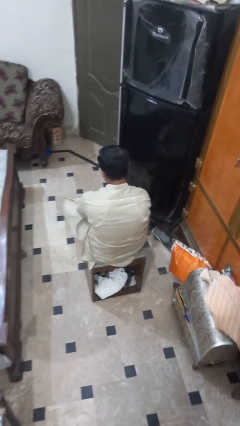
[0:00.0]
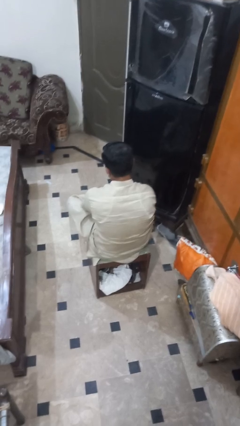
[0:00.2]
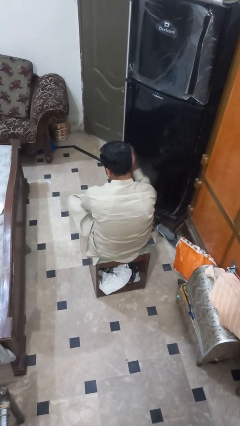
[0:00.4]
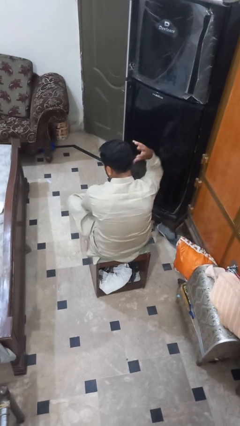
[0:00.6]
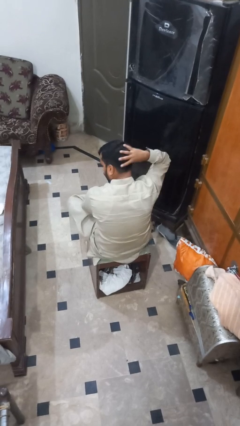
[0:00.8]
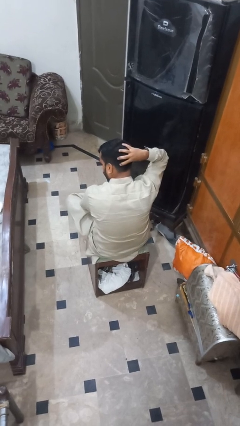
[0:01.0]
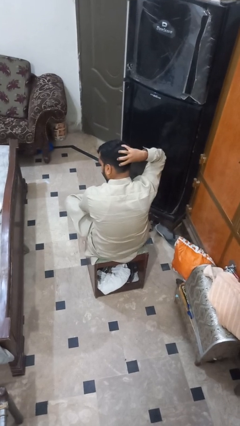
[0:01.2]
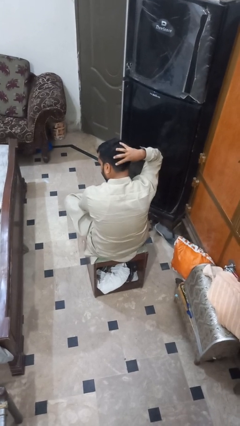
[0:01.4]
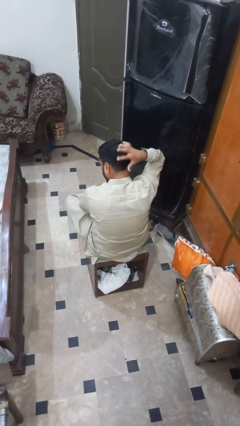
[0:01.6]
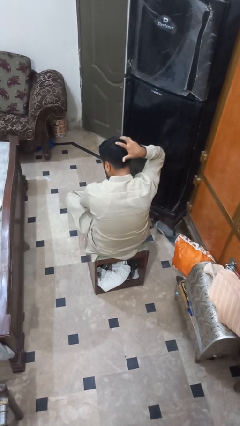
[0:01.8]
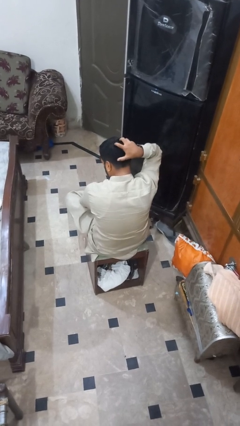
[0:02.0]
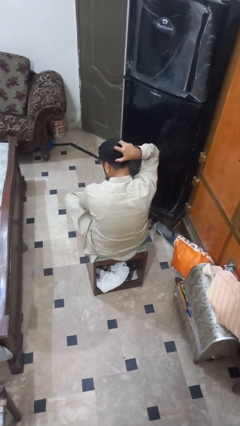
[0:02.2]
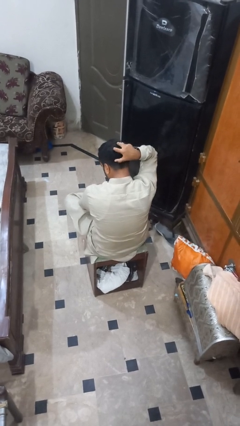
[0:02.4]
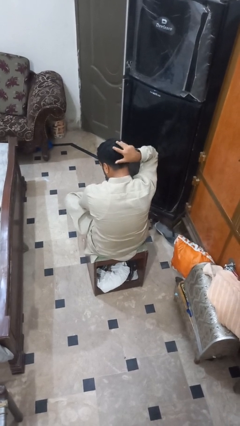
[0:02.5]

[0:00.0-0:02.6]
person strokes hair

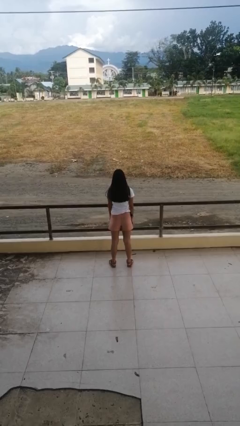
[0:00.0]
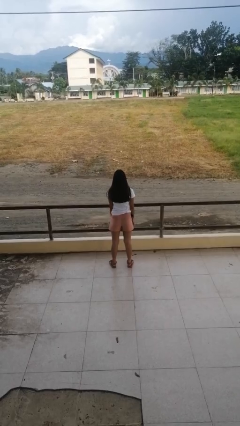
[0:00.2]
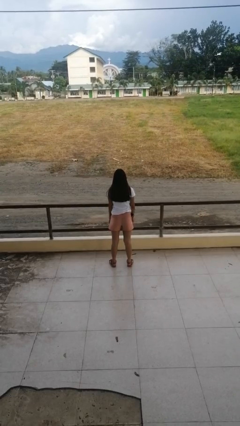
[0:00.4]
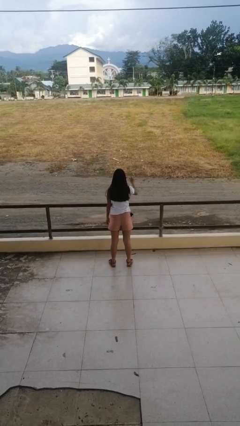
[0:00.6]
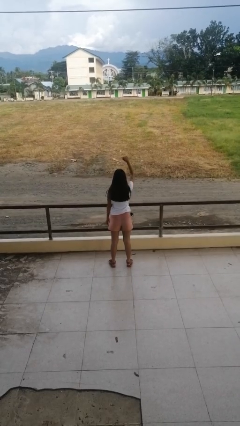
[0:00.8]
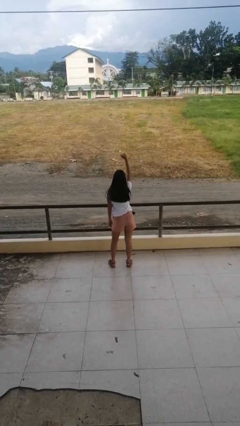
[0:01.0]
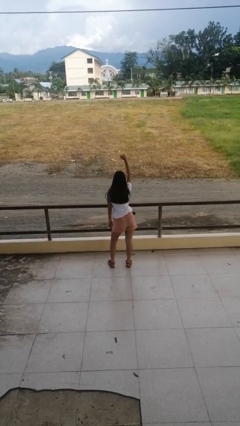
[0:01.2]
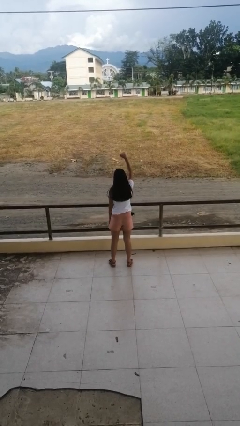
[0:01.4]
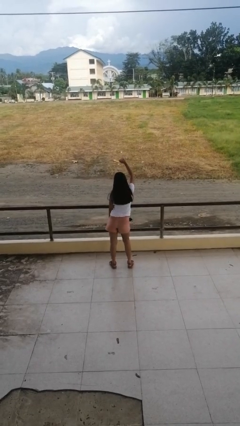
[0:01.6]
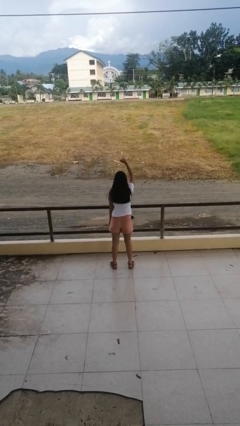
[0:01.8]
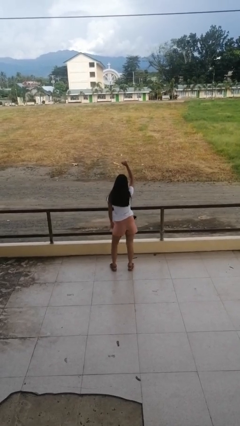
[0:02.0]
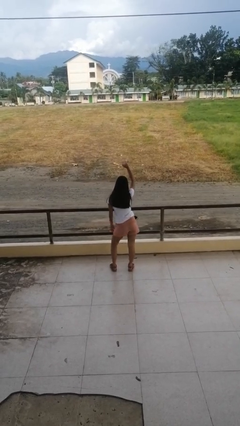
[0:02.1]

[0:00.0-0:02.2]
person dances in place

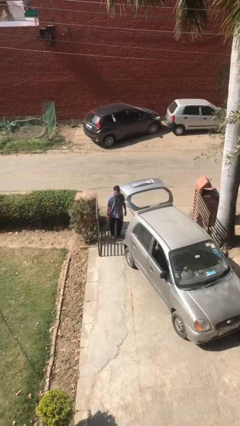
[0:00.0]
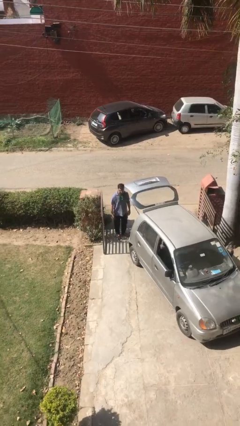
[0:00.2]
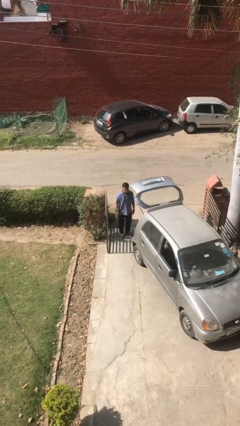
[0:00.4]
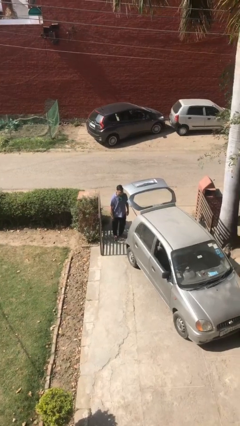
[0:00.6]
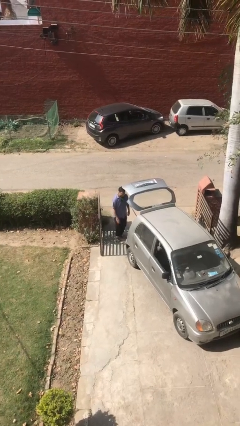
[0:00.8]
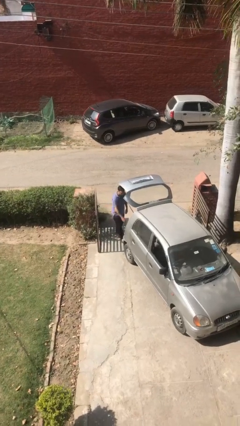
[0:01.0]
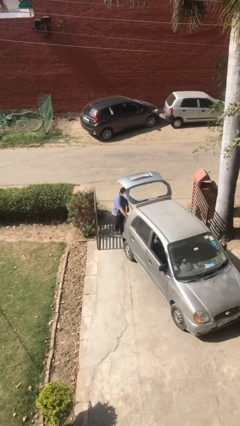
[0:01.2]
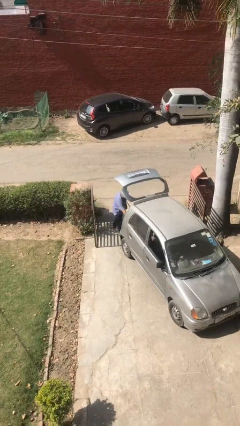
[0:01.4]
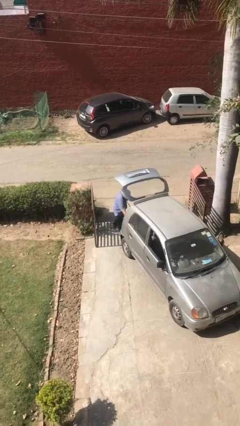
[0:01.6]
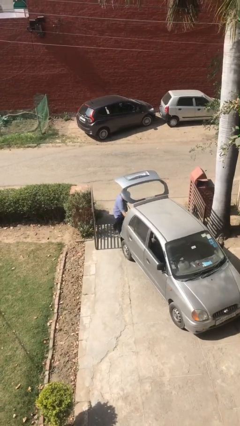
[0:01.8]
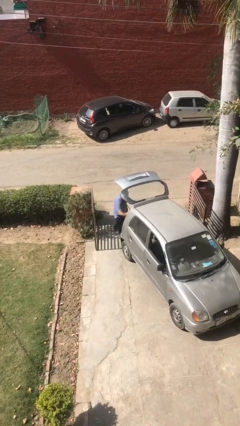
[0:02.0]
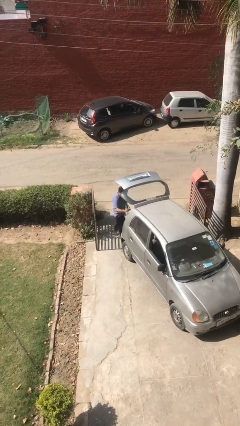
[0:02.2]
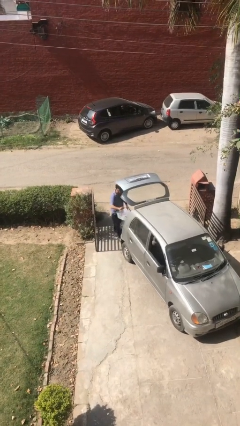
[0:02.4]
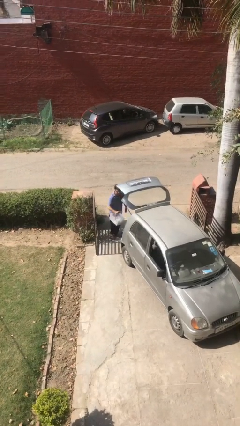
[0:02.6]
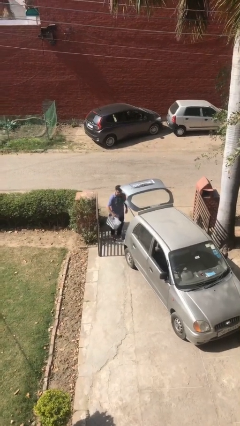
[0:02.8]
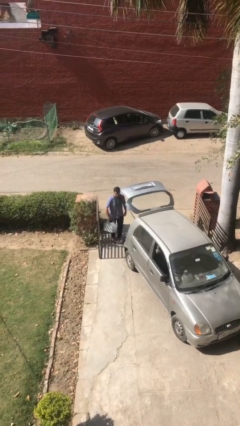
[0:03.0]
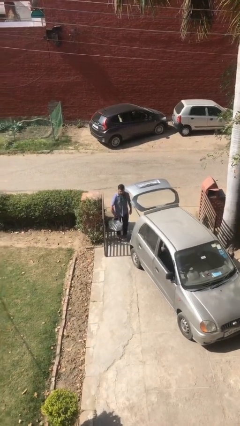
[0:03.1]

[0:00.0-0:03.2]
person unloads car

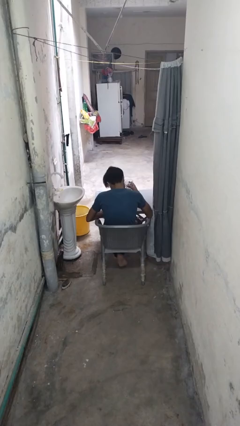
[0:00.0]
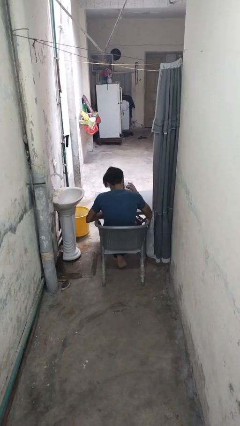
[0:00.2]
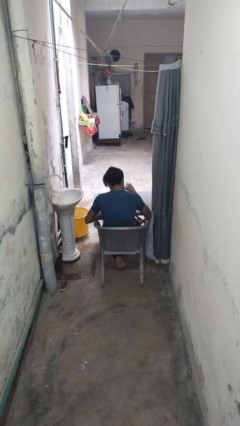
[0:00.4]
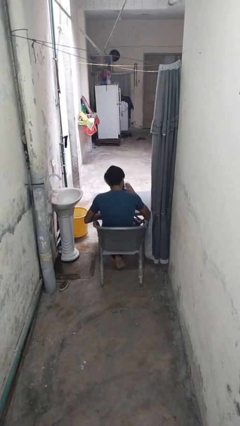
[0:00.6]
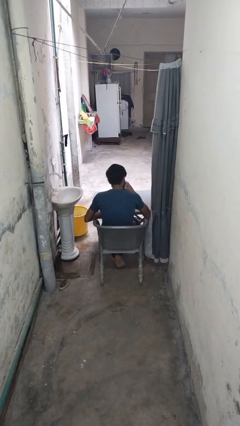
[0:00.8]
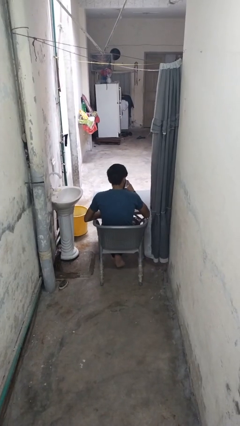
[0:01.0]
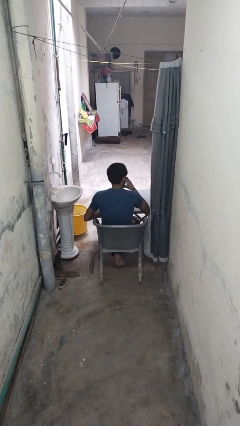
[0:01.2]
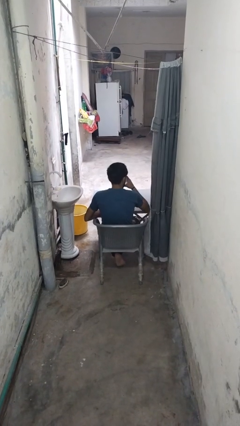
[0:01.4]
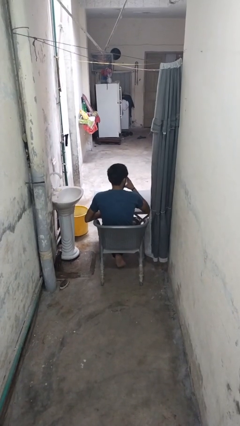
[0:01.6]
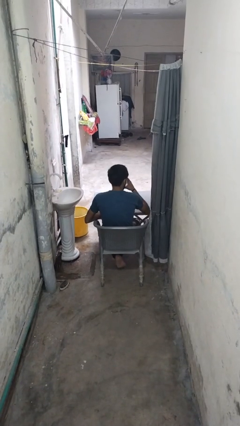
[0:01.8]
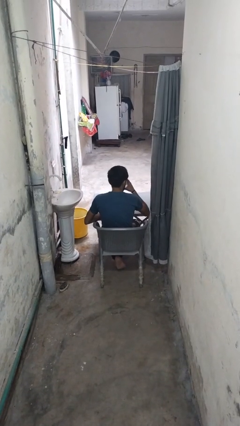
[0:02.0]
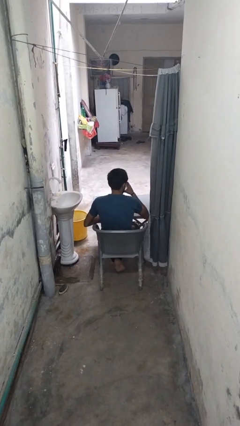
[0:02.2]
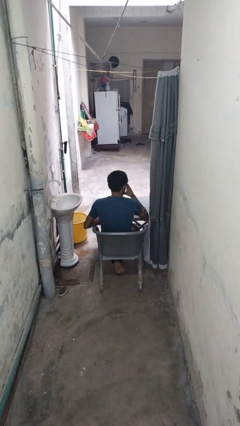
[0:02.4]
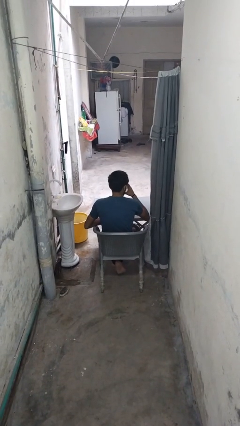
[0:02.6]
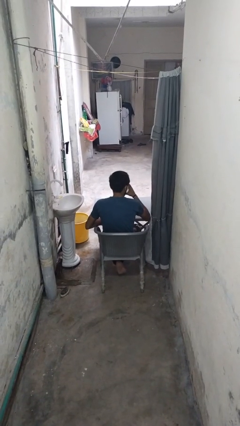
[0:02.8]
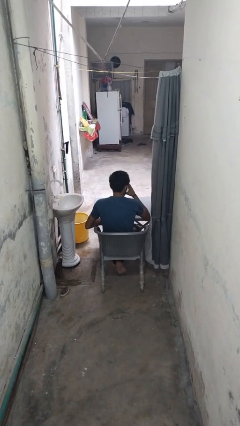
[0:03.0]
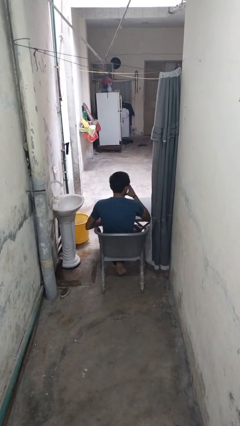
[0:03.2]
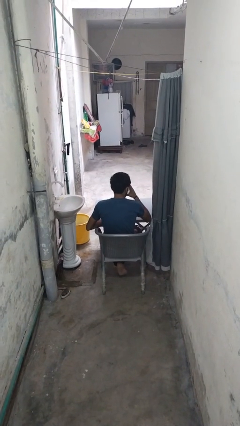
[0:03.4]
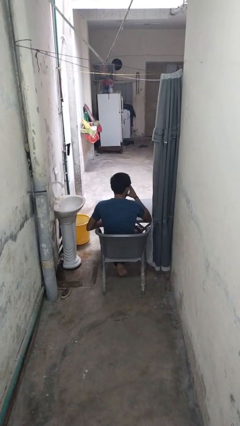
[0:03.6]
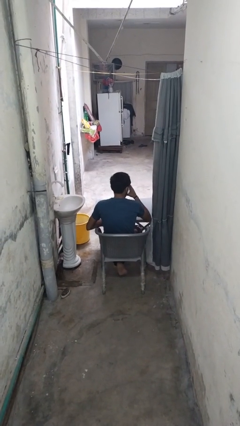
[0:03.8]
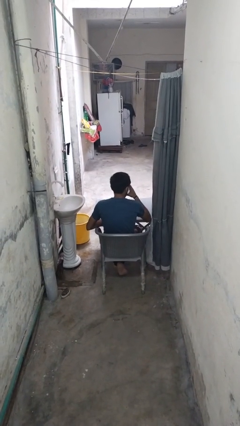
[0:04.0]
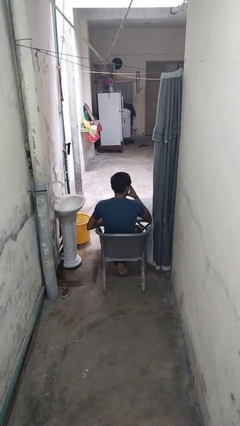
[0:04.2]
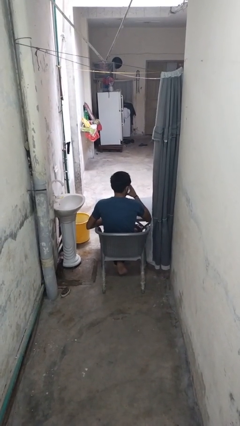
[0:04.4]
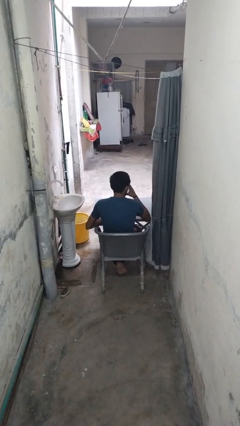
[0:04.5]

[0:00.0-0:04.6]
person drinks from mug

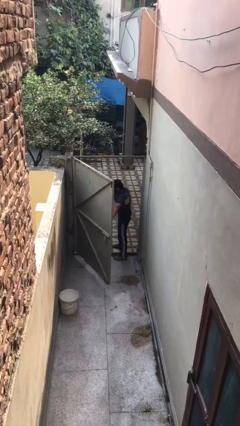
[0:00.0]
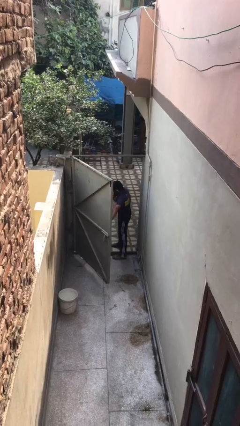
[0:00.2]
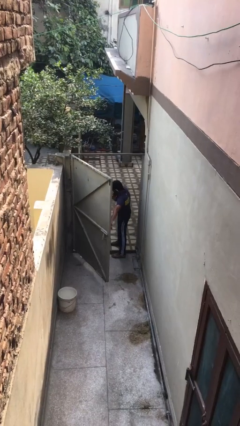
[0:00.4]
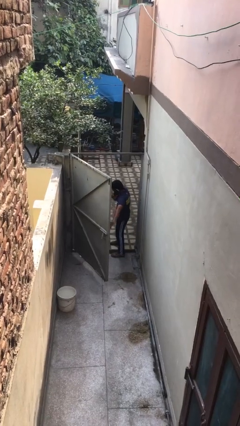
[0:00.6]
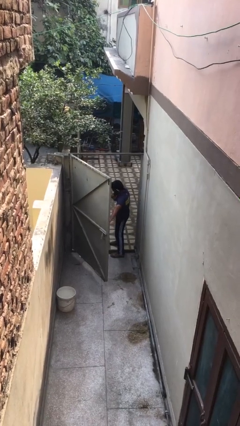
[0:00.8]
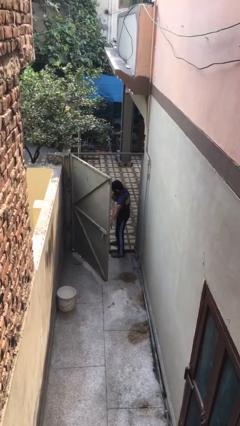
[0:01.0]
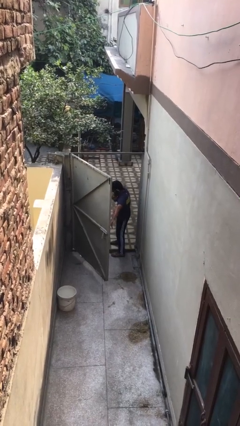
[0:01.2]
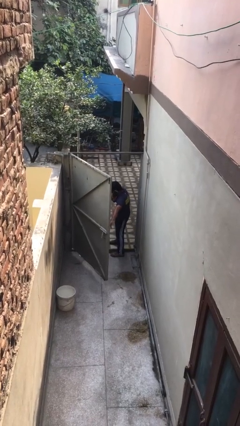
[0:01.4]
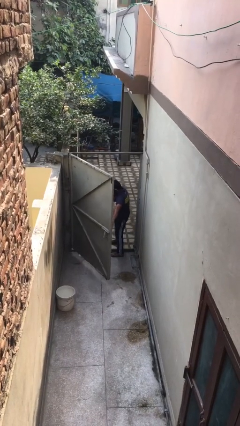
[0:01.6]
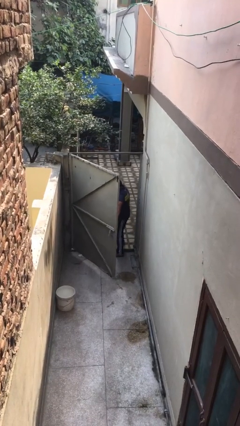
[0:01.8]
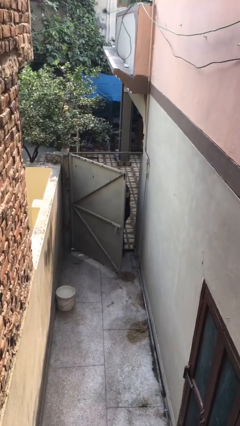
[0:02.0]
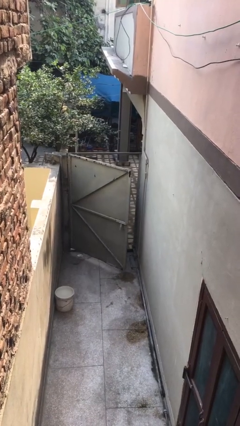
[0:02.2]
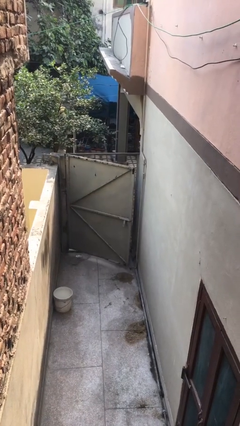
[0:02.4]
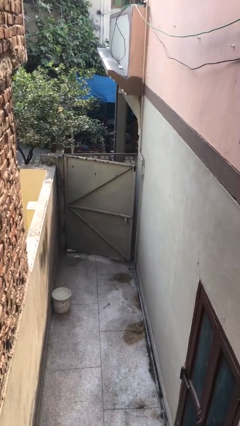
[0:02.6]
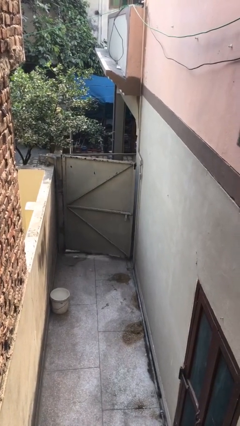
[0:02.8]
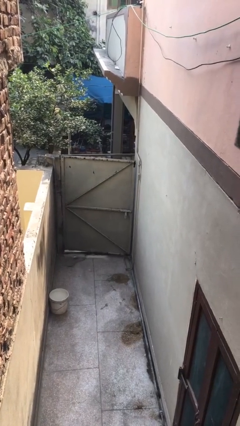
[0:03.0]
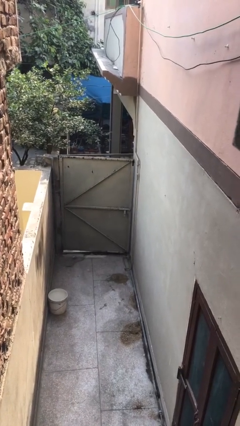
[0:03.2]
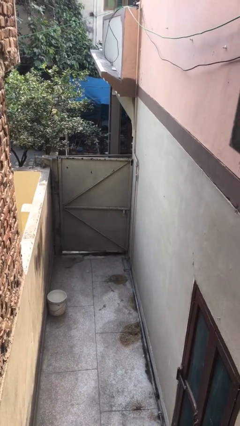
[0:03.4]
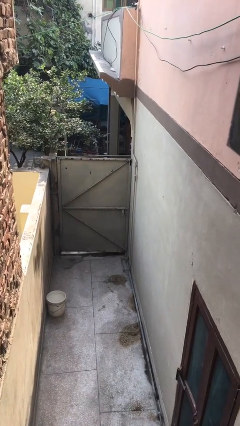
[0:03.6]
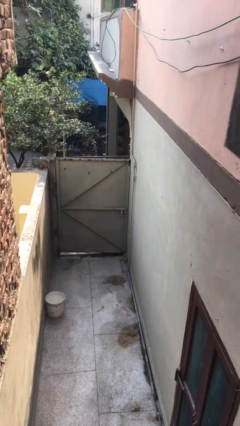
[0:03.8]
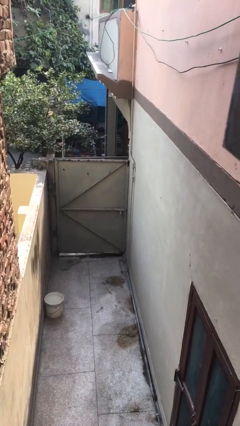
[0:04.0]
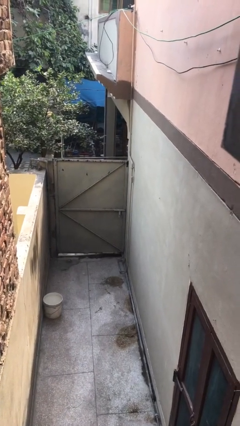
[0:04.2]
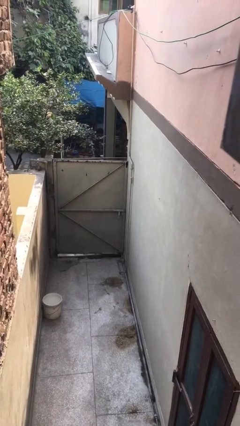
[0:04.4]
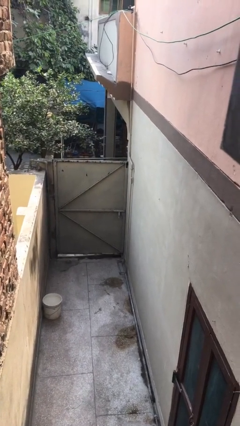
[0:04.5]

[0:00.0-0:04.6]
person closes facility door
